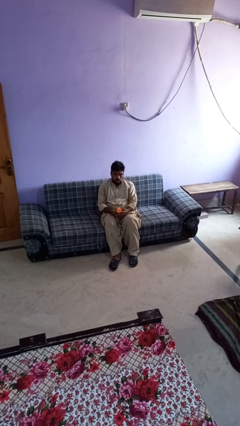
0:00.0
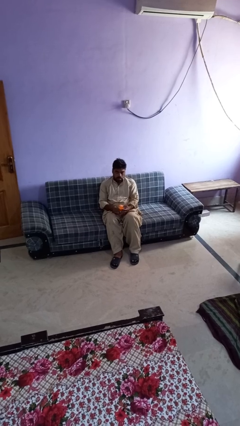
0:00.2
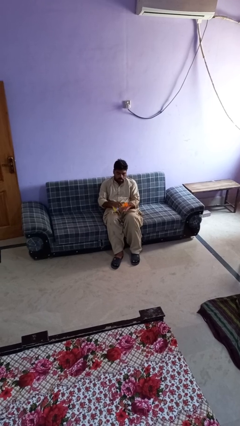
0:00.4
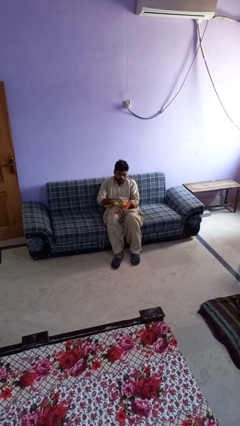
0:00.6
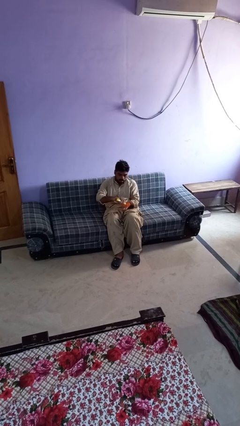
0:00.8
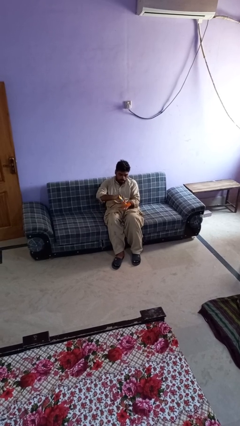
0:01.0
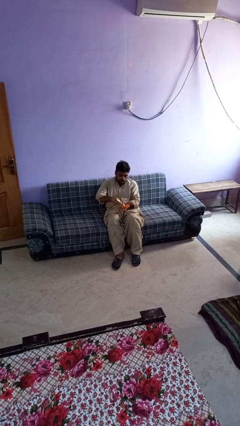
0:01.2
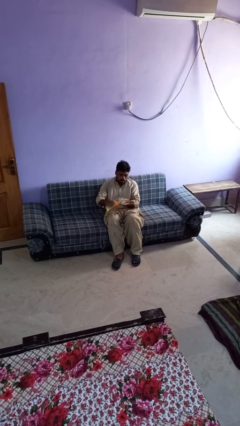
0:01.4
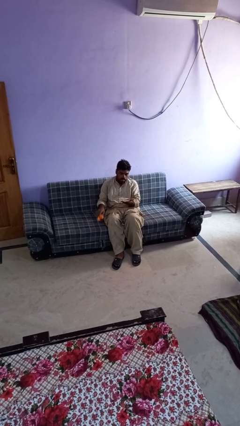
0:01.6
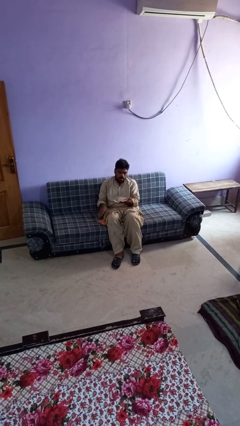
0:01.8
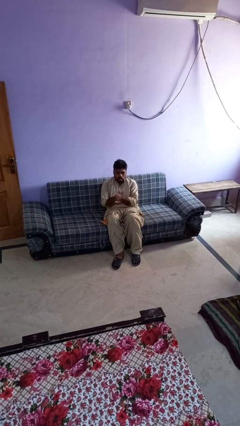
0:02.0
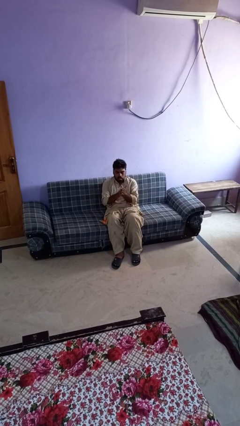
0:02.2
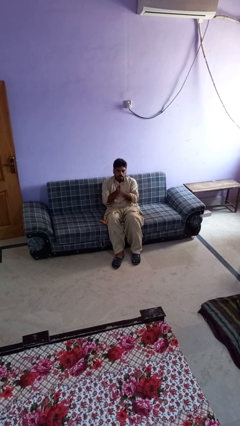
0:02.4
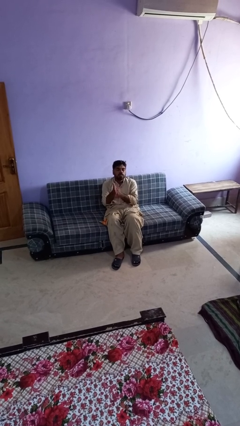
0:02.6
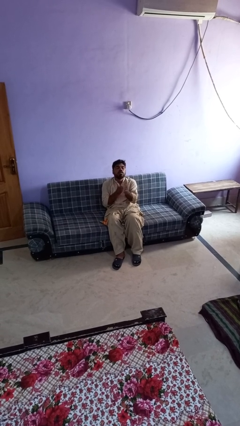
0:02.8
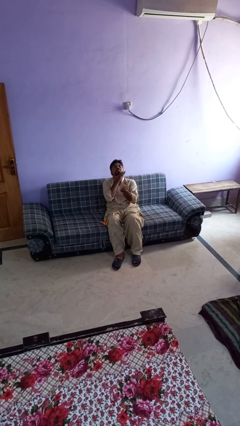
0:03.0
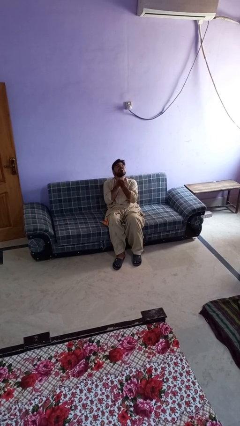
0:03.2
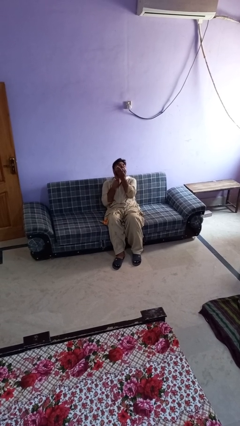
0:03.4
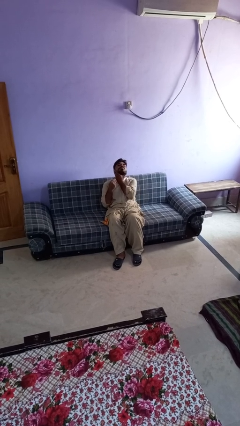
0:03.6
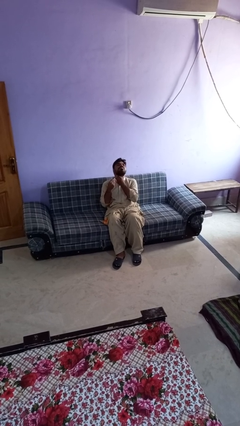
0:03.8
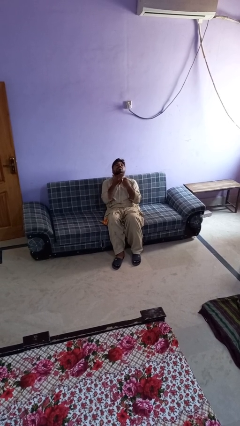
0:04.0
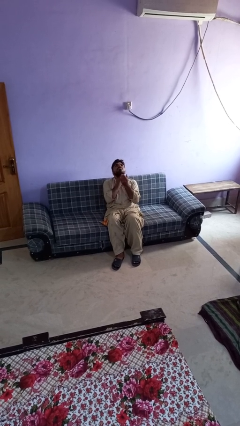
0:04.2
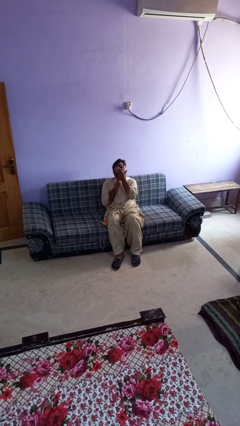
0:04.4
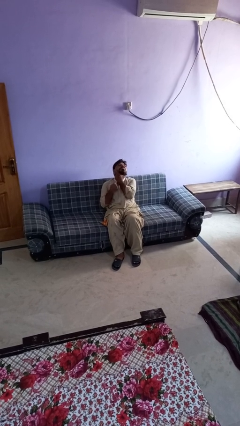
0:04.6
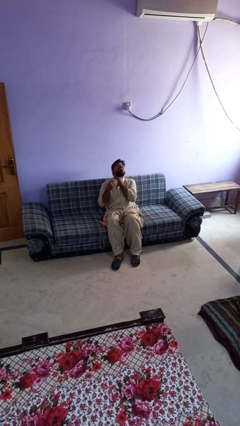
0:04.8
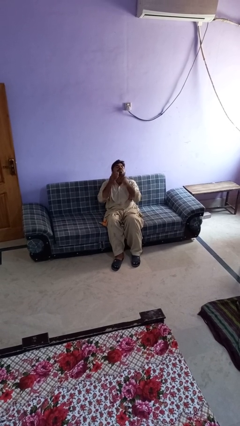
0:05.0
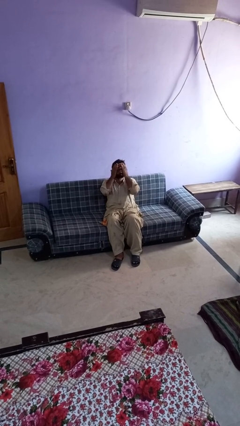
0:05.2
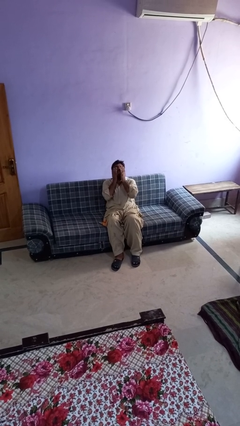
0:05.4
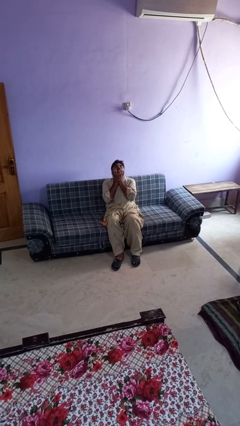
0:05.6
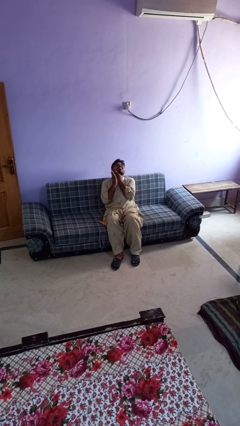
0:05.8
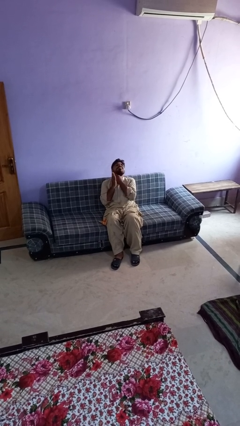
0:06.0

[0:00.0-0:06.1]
person applies sunscreen

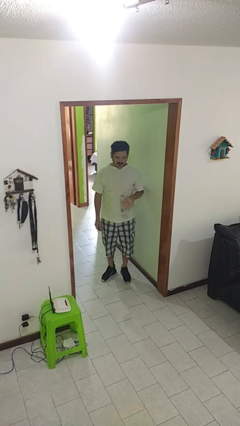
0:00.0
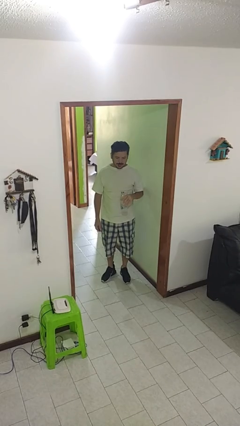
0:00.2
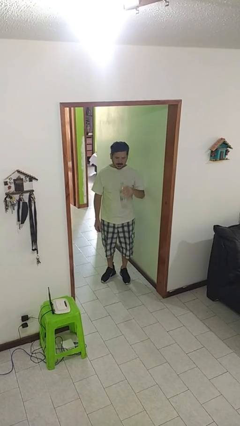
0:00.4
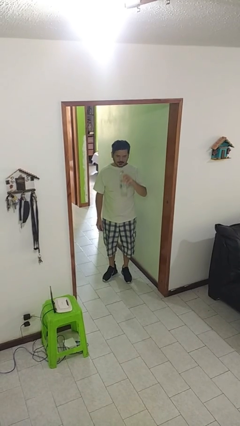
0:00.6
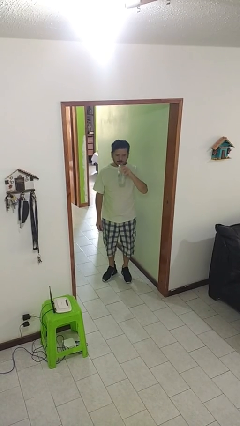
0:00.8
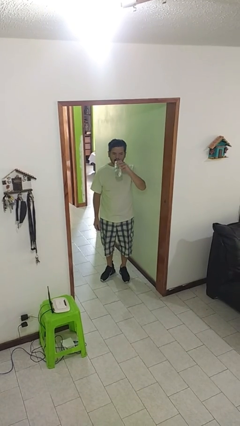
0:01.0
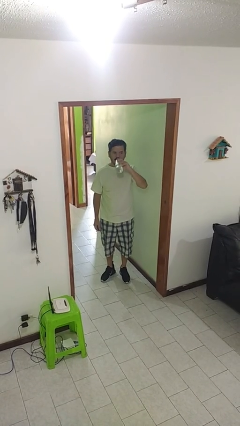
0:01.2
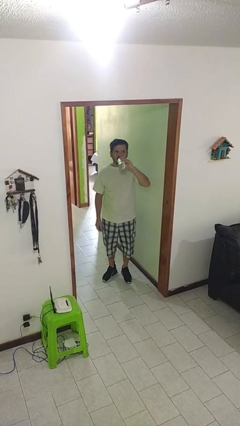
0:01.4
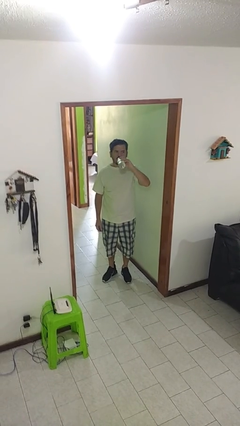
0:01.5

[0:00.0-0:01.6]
person drinks from bottle

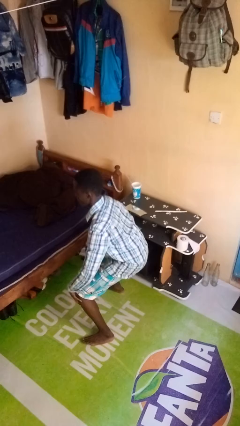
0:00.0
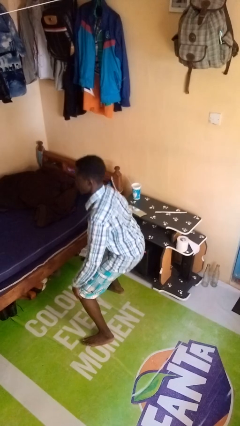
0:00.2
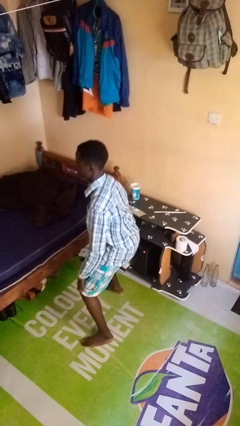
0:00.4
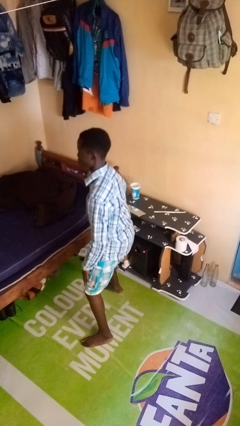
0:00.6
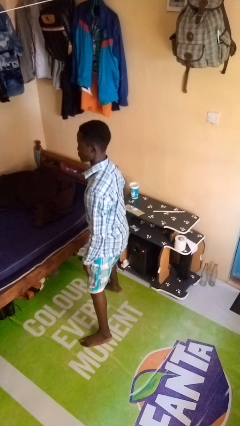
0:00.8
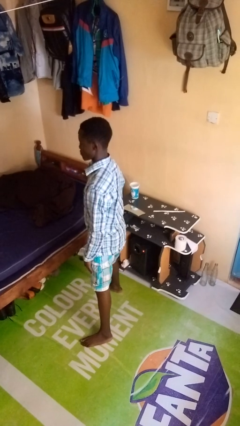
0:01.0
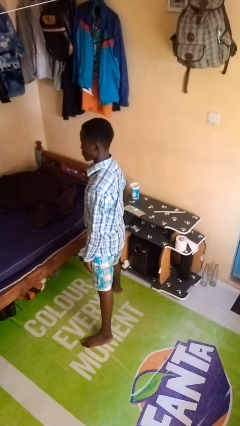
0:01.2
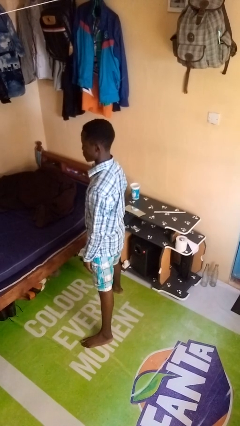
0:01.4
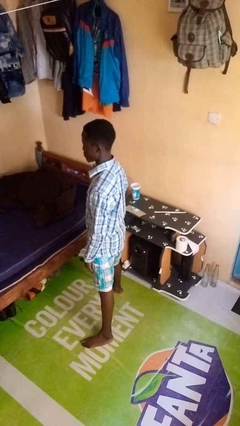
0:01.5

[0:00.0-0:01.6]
person stands up

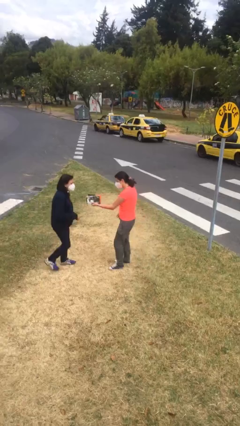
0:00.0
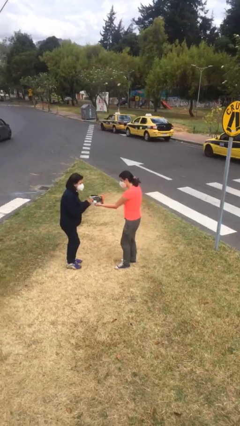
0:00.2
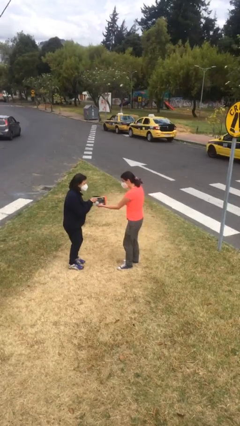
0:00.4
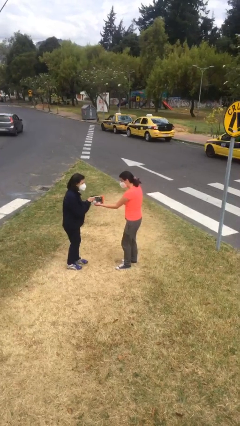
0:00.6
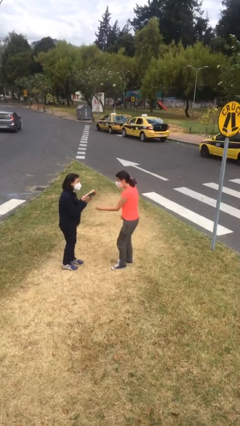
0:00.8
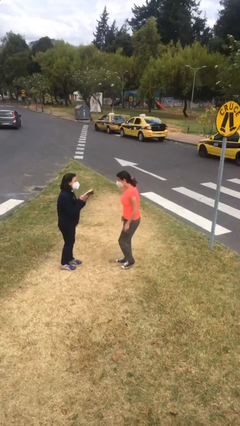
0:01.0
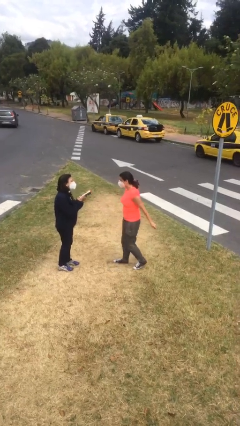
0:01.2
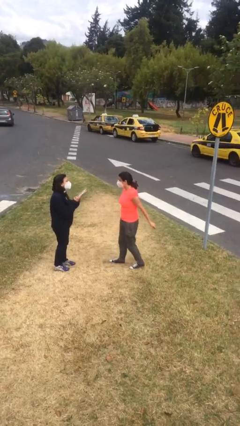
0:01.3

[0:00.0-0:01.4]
person transfers object to person

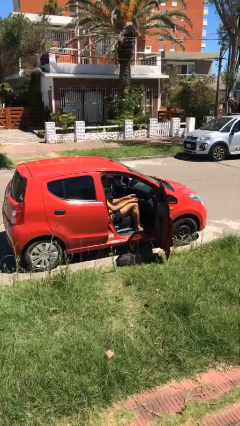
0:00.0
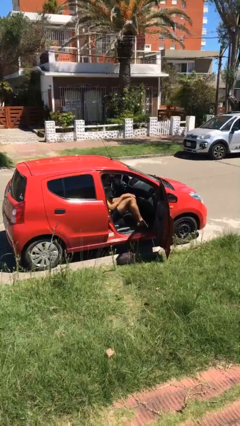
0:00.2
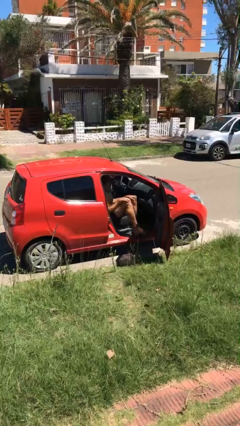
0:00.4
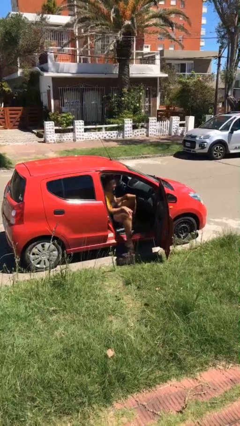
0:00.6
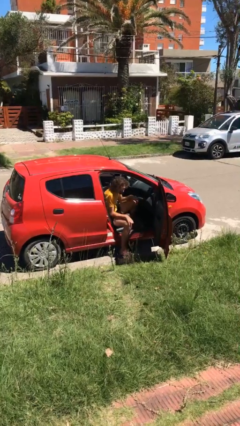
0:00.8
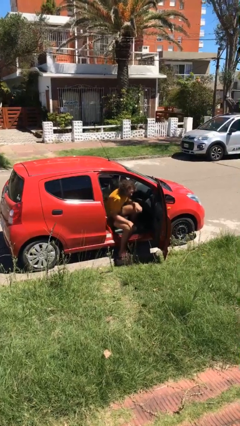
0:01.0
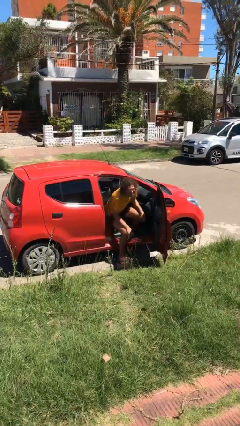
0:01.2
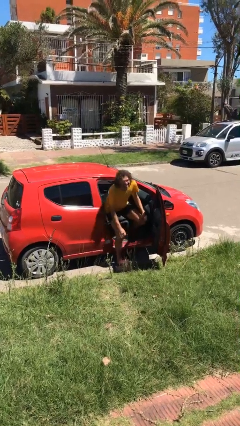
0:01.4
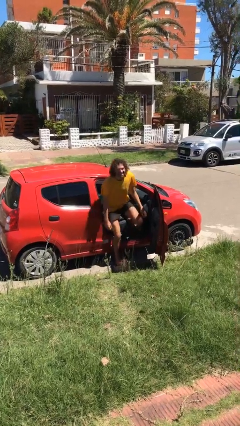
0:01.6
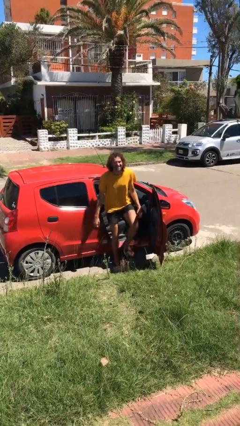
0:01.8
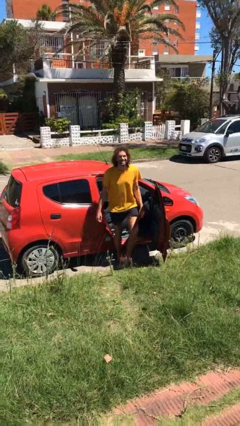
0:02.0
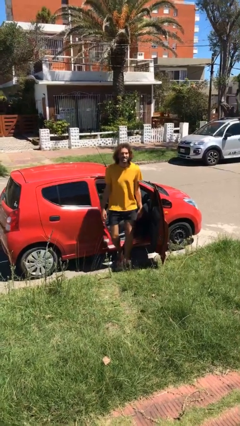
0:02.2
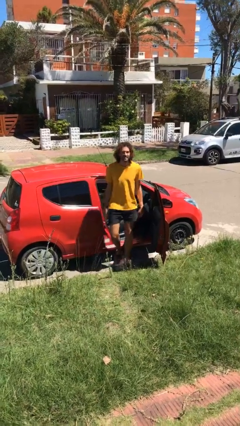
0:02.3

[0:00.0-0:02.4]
person exits car

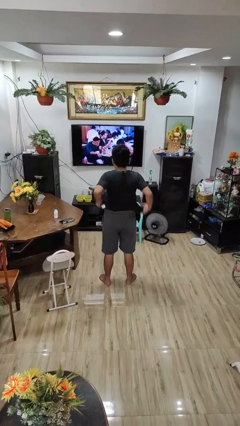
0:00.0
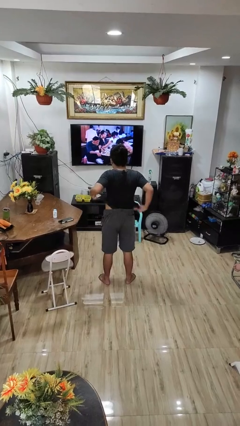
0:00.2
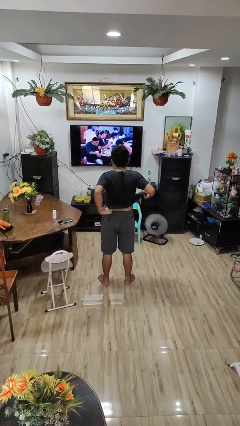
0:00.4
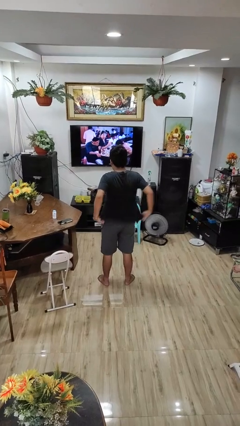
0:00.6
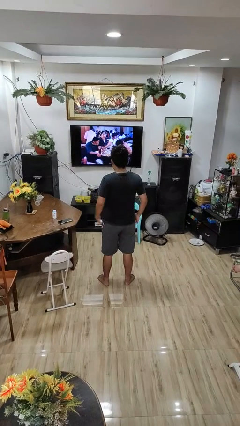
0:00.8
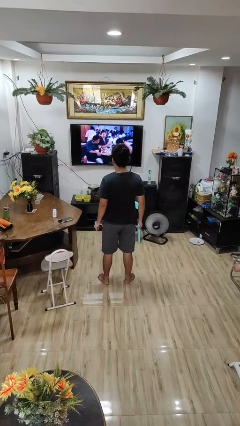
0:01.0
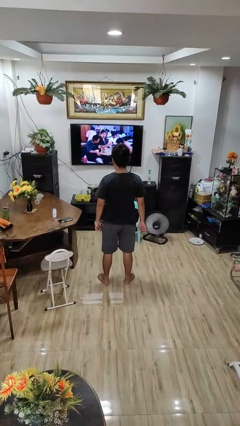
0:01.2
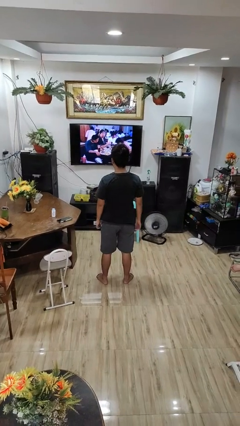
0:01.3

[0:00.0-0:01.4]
person untucks shirt

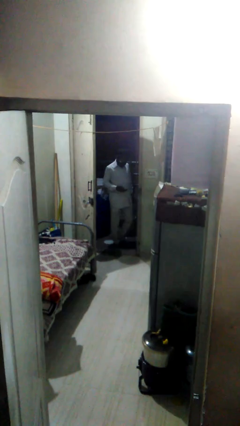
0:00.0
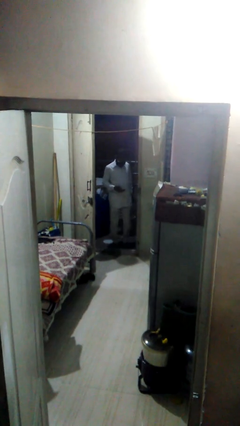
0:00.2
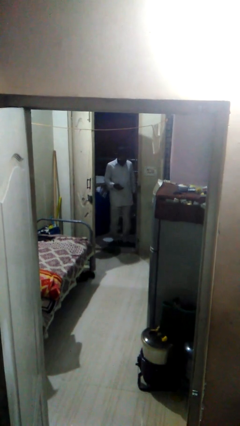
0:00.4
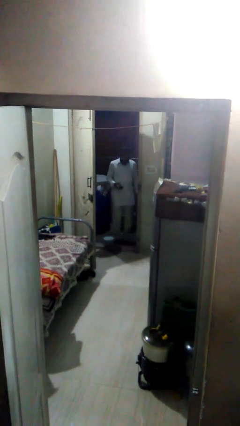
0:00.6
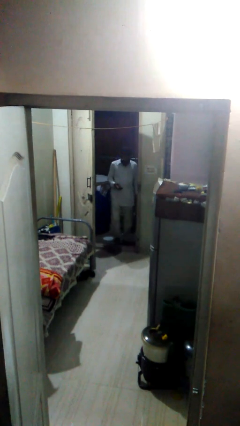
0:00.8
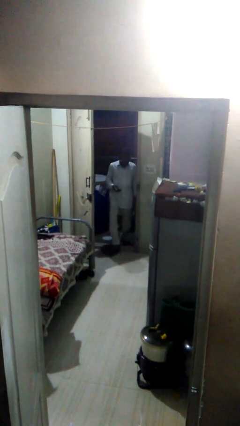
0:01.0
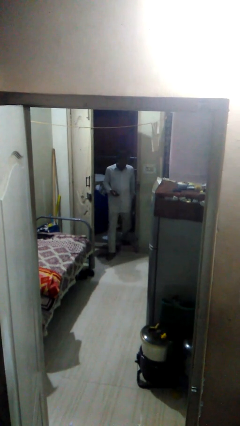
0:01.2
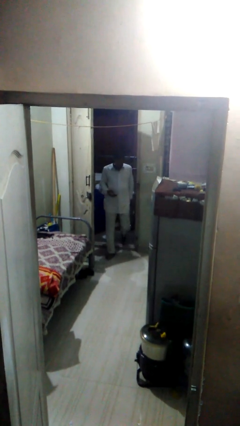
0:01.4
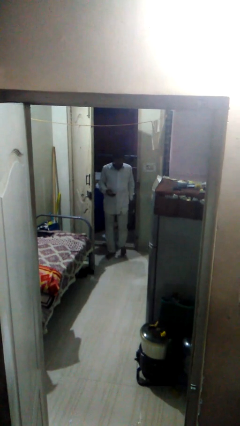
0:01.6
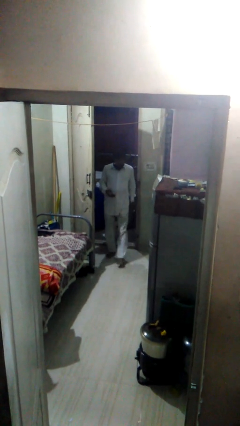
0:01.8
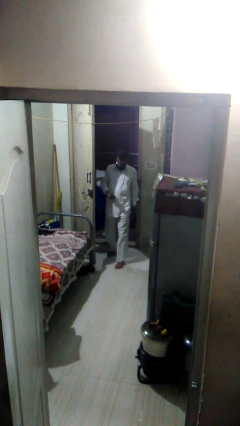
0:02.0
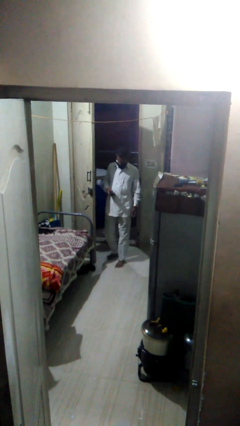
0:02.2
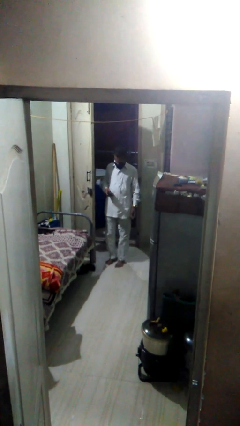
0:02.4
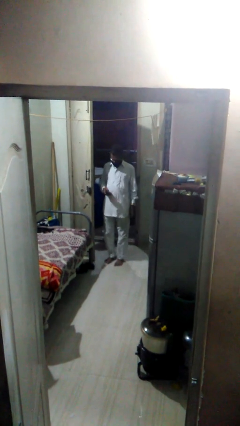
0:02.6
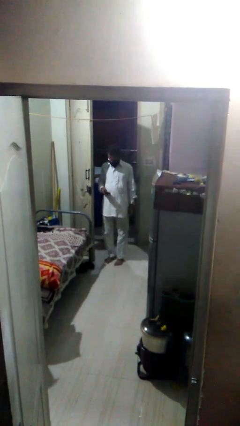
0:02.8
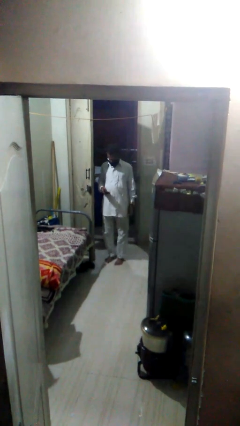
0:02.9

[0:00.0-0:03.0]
person enters scene through structure
